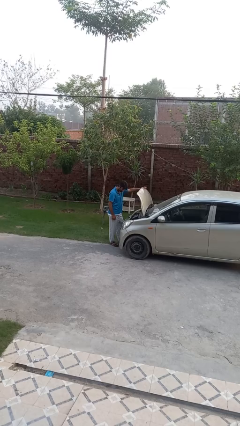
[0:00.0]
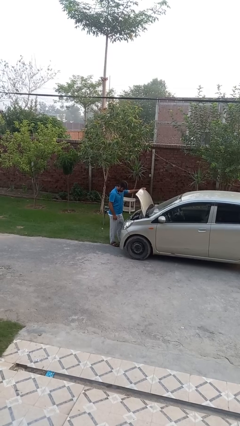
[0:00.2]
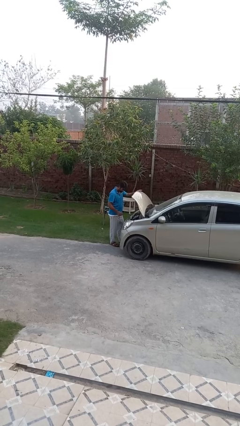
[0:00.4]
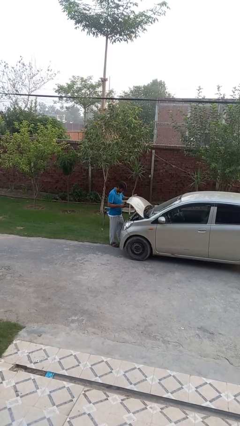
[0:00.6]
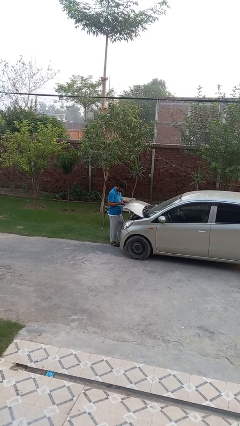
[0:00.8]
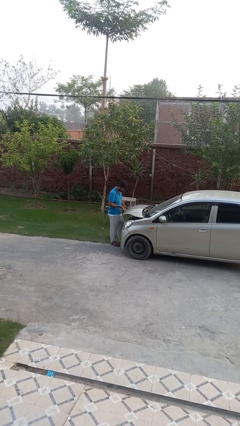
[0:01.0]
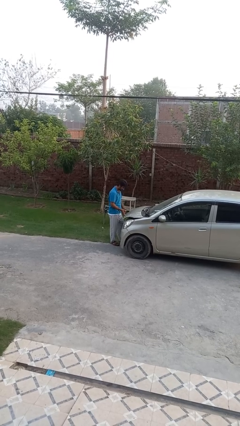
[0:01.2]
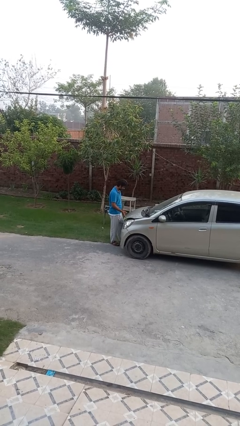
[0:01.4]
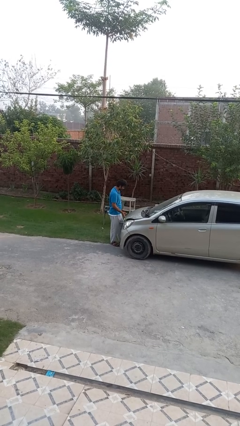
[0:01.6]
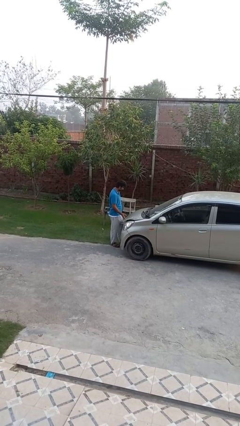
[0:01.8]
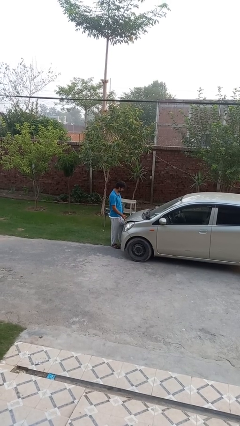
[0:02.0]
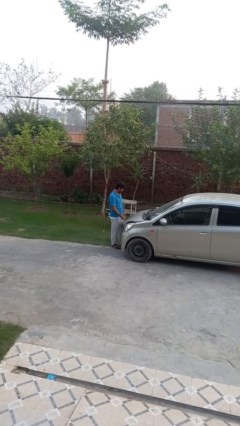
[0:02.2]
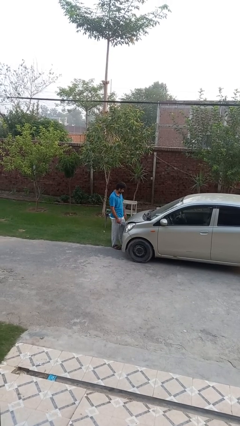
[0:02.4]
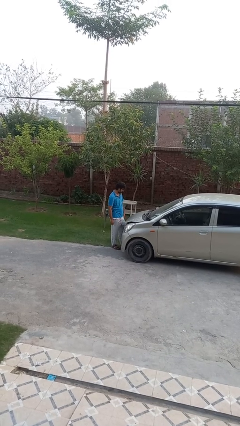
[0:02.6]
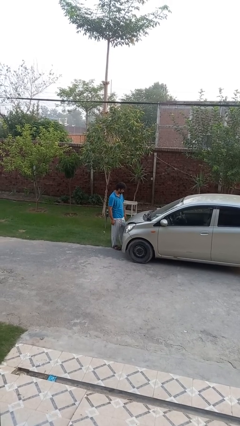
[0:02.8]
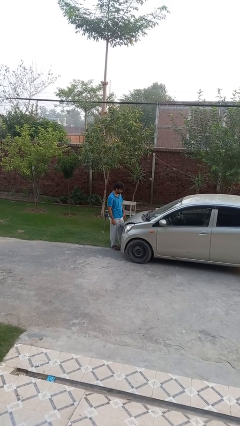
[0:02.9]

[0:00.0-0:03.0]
person closes car hood

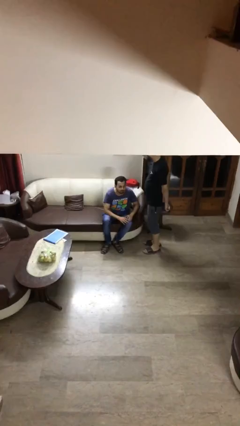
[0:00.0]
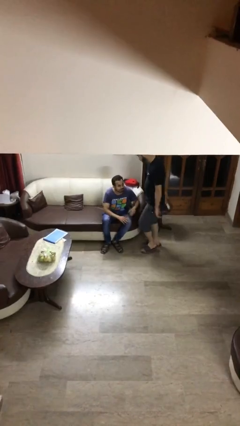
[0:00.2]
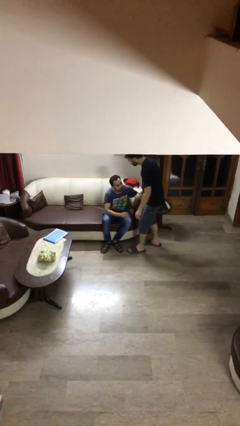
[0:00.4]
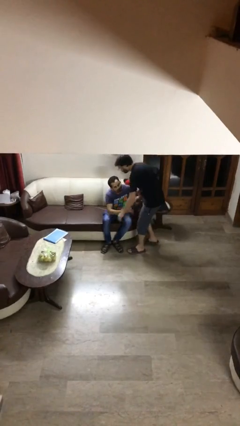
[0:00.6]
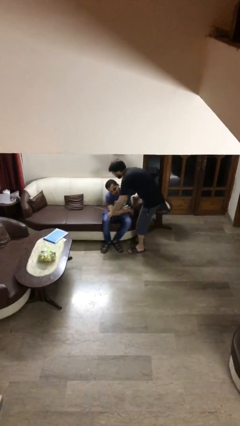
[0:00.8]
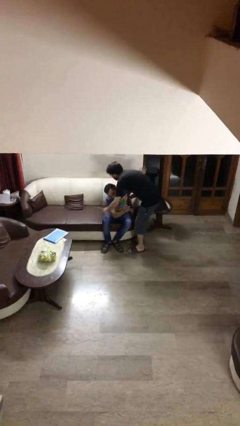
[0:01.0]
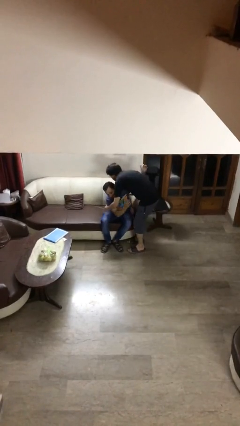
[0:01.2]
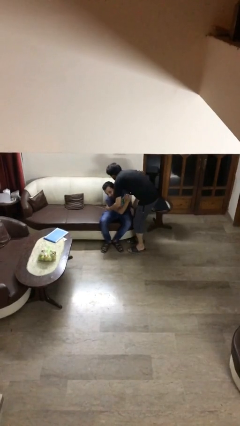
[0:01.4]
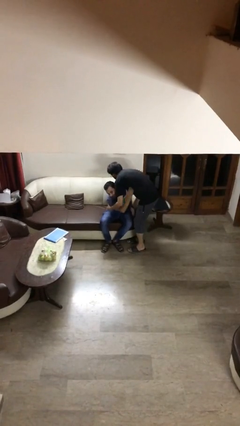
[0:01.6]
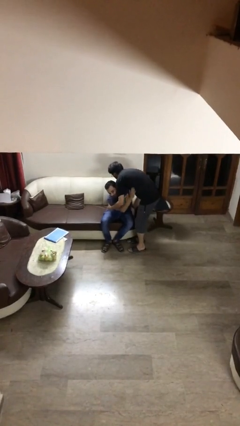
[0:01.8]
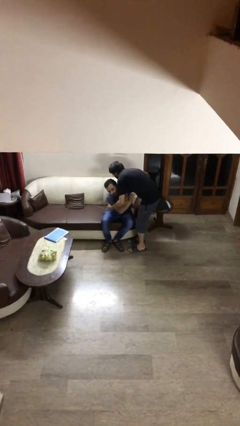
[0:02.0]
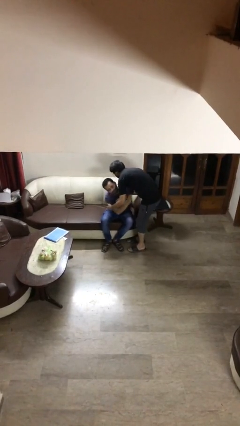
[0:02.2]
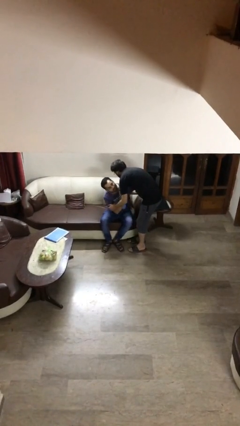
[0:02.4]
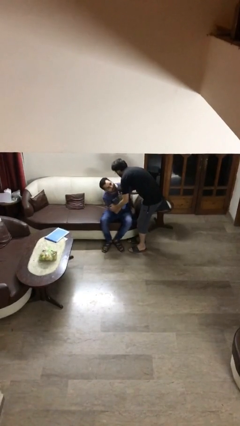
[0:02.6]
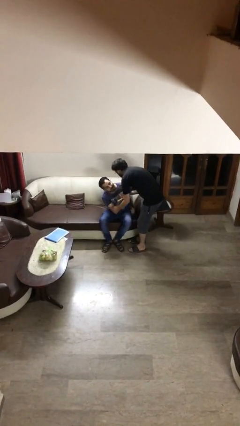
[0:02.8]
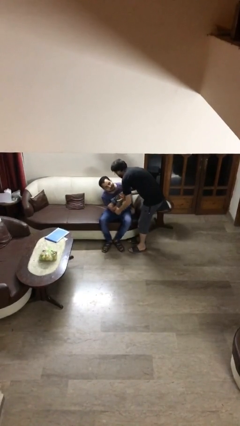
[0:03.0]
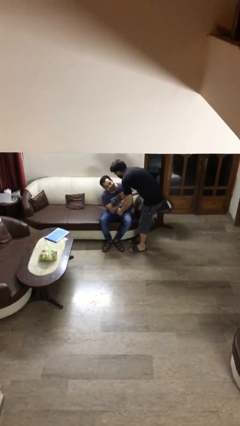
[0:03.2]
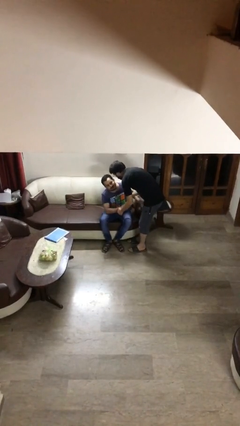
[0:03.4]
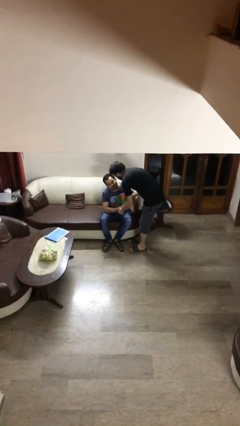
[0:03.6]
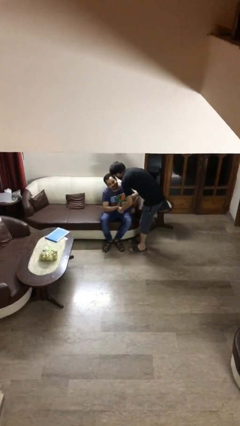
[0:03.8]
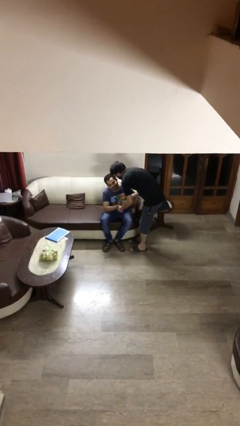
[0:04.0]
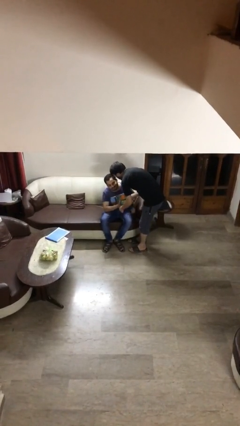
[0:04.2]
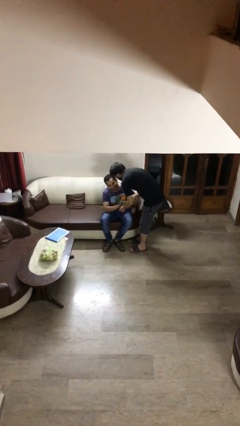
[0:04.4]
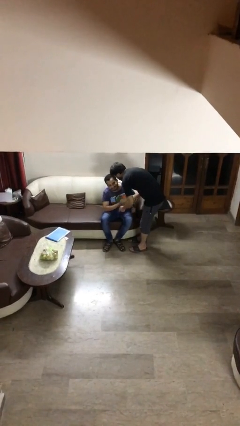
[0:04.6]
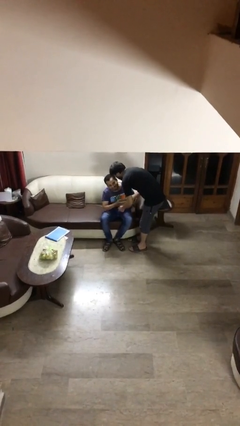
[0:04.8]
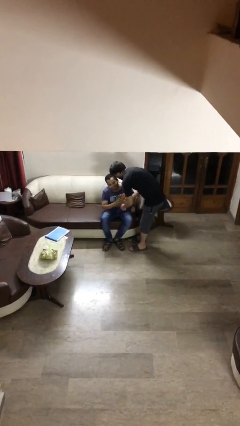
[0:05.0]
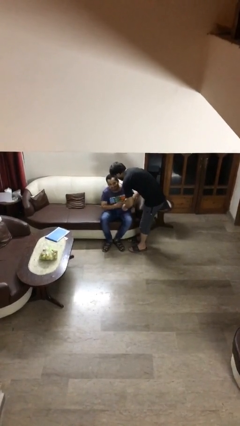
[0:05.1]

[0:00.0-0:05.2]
person embraces person

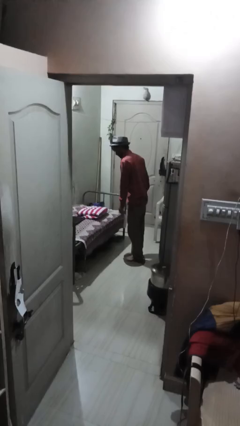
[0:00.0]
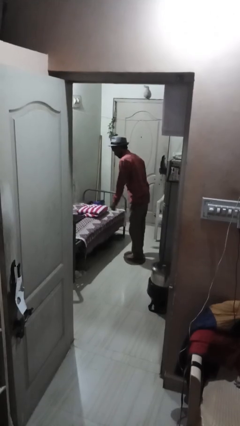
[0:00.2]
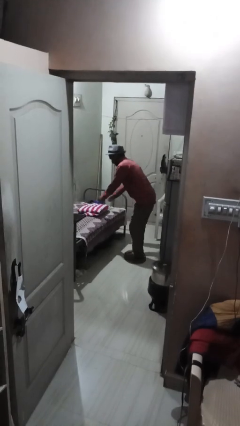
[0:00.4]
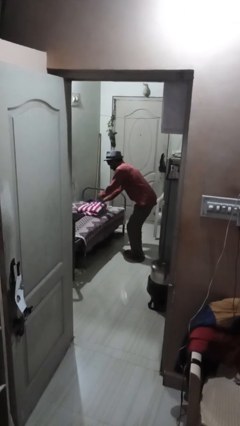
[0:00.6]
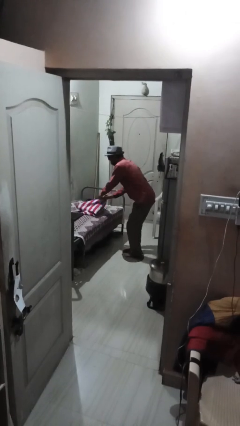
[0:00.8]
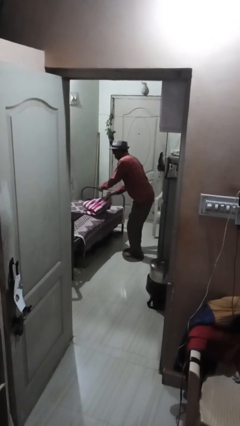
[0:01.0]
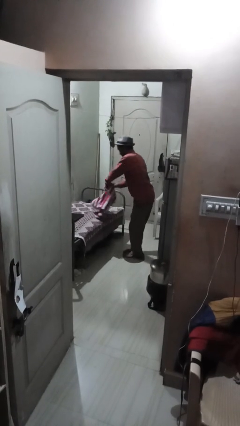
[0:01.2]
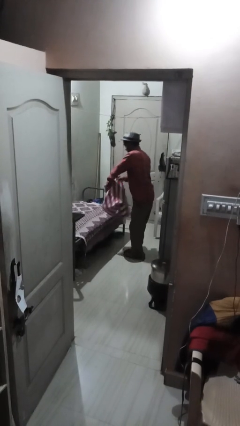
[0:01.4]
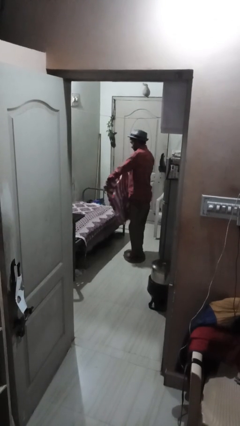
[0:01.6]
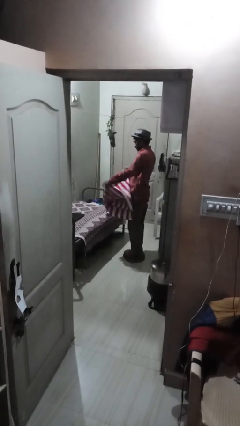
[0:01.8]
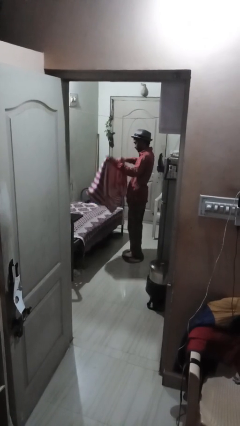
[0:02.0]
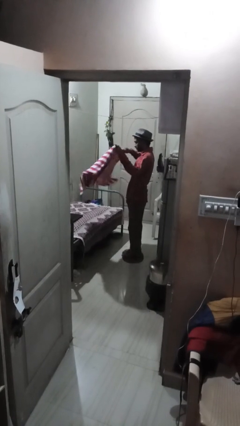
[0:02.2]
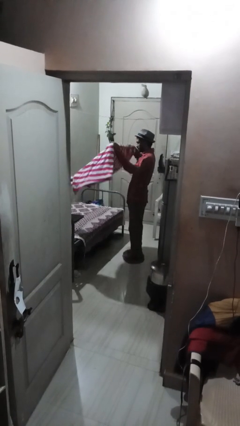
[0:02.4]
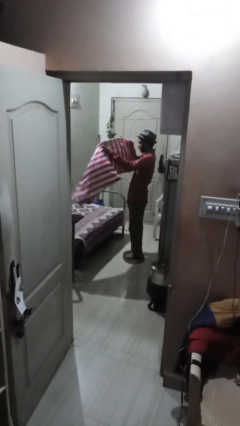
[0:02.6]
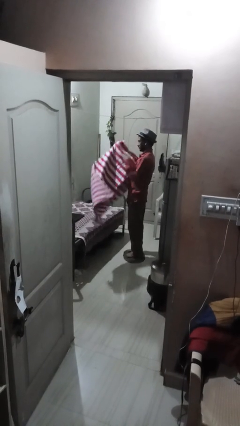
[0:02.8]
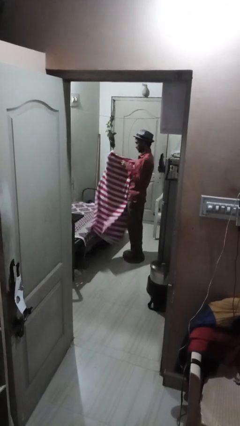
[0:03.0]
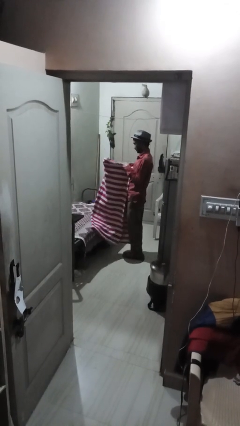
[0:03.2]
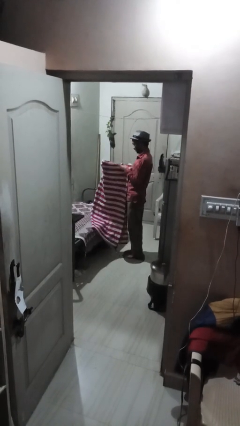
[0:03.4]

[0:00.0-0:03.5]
person unfolds blanket

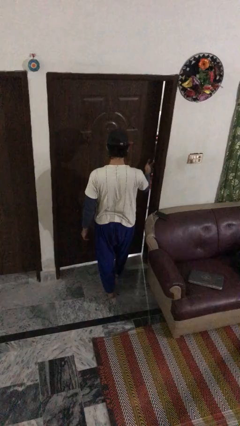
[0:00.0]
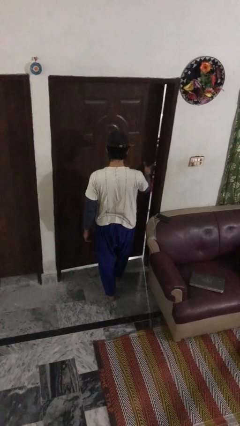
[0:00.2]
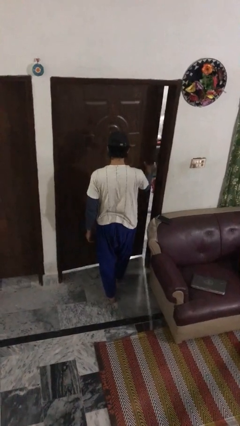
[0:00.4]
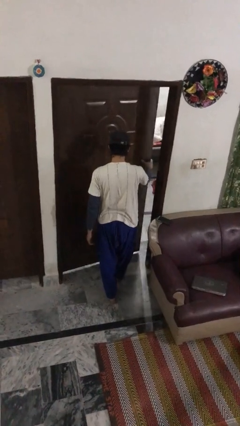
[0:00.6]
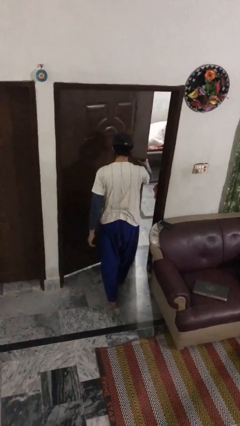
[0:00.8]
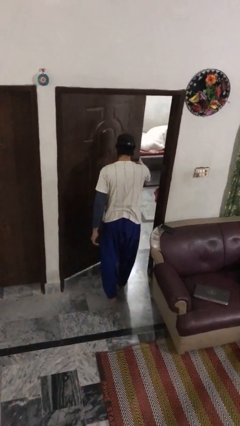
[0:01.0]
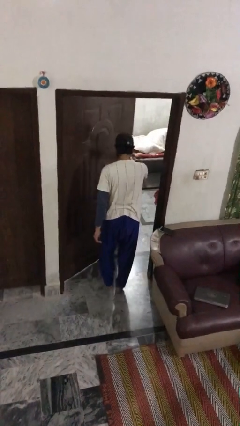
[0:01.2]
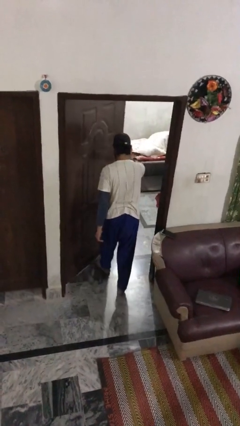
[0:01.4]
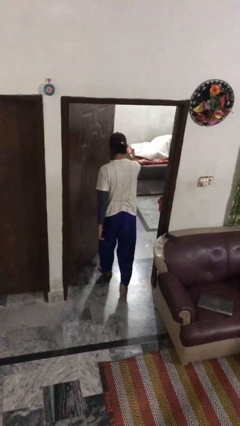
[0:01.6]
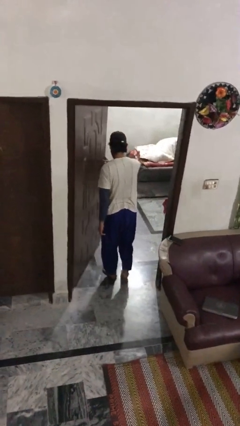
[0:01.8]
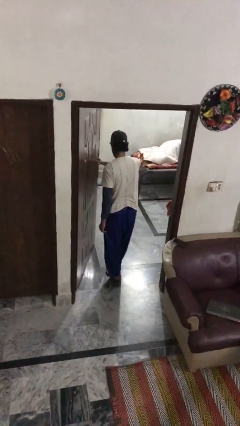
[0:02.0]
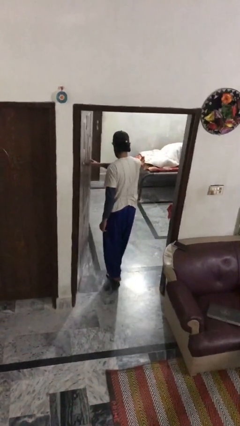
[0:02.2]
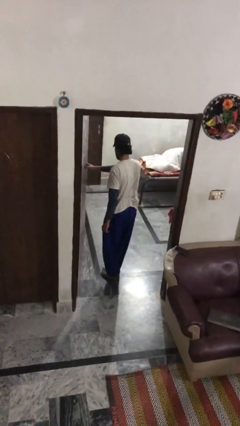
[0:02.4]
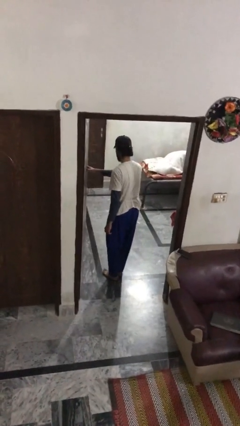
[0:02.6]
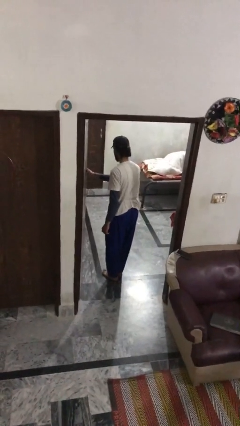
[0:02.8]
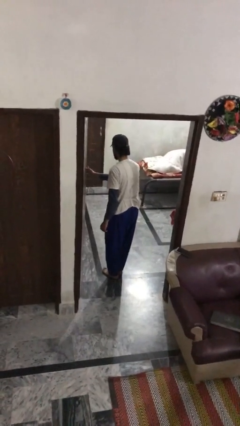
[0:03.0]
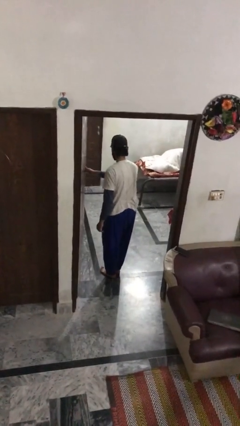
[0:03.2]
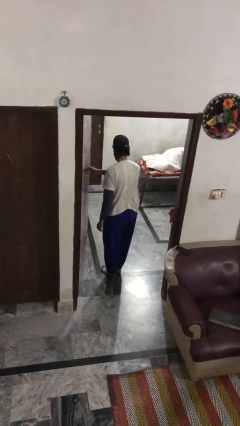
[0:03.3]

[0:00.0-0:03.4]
person opens facility door

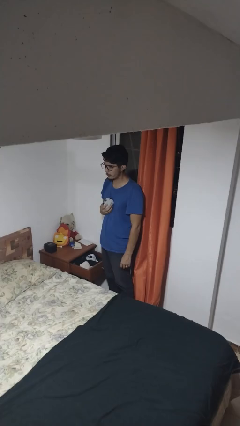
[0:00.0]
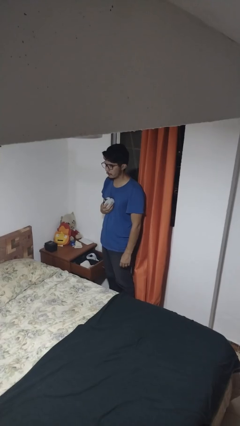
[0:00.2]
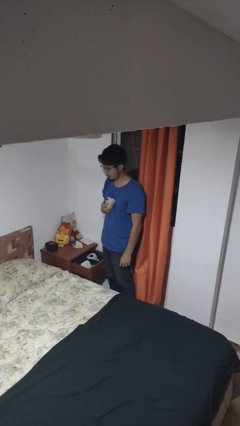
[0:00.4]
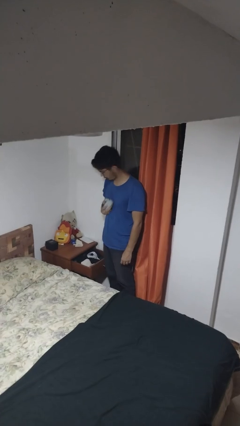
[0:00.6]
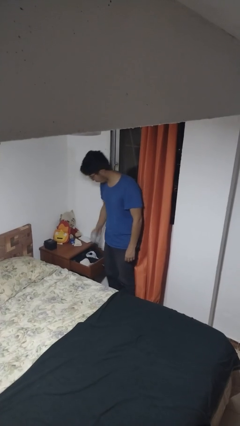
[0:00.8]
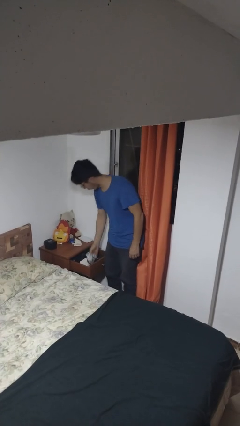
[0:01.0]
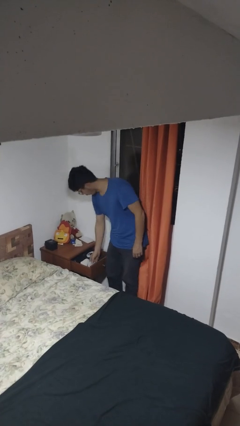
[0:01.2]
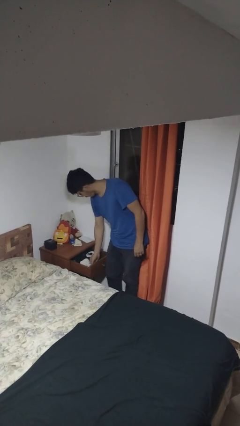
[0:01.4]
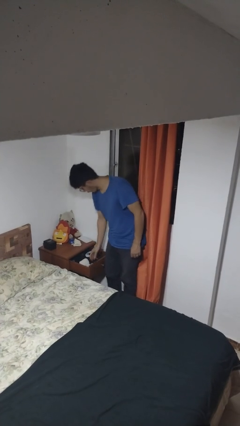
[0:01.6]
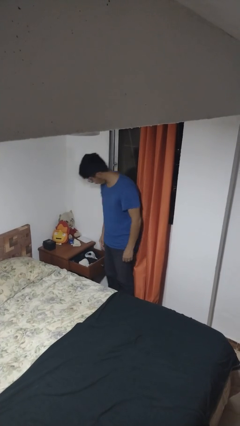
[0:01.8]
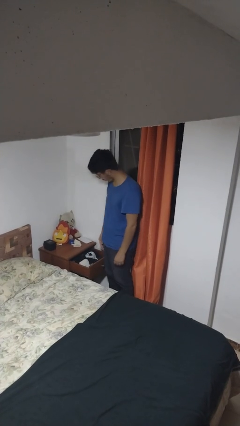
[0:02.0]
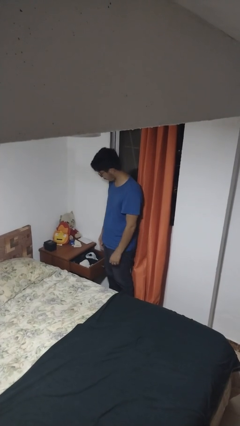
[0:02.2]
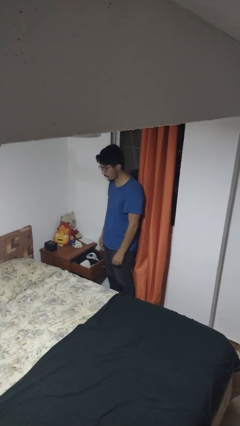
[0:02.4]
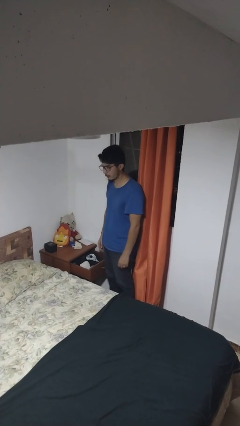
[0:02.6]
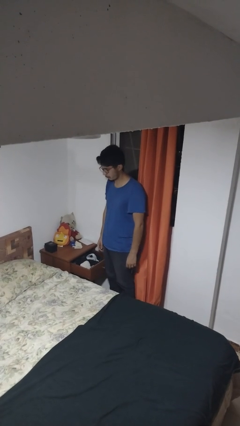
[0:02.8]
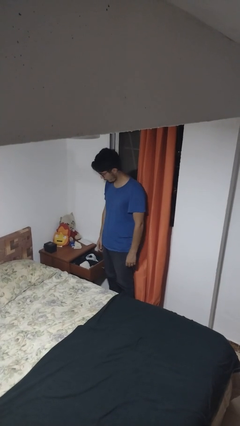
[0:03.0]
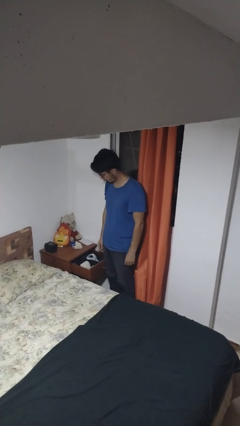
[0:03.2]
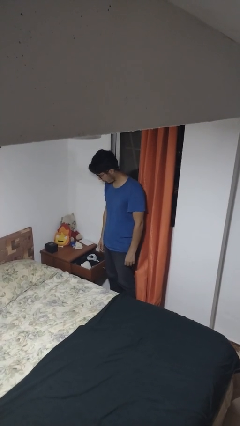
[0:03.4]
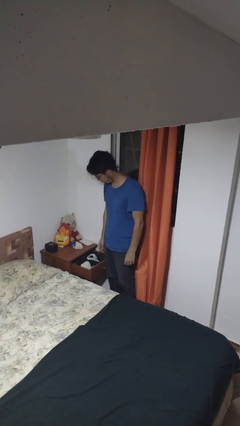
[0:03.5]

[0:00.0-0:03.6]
person puts clothes into dresser
